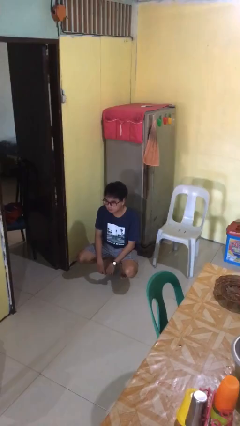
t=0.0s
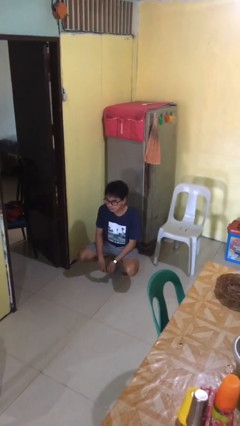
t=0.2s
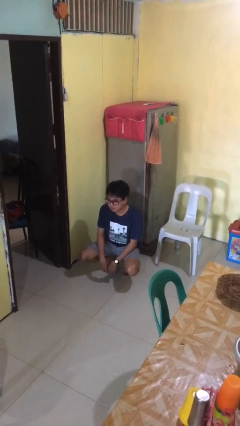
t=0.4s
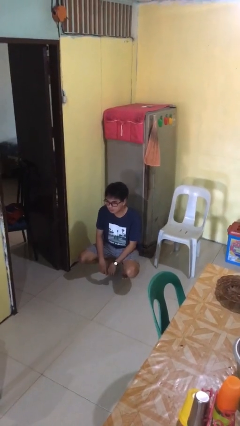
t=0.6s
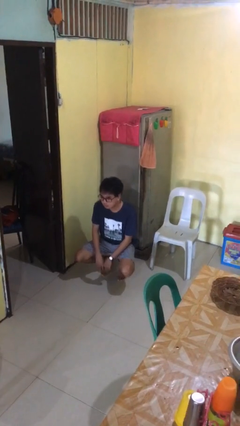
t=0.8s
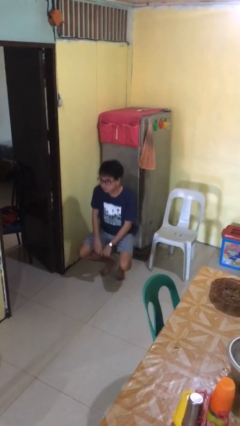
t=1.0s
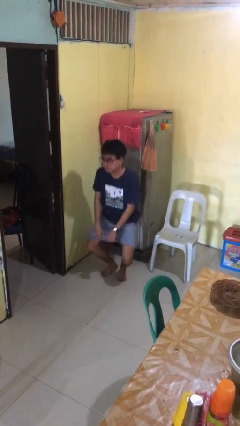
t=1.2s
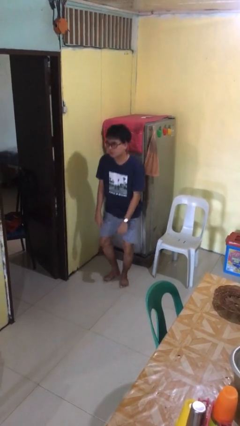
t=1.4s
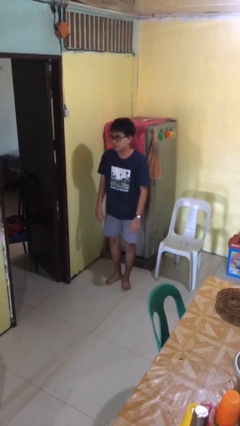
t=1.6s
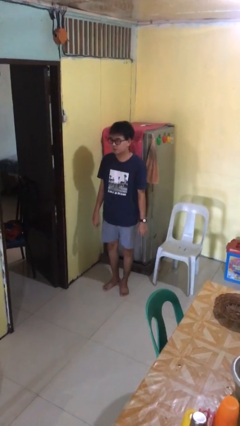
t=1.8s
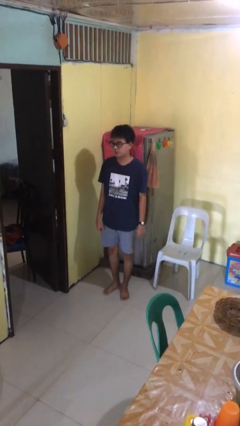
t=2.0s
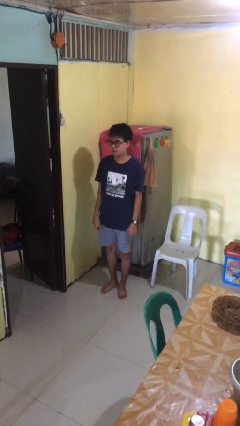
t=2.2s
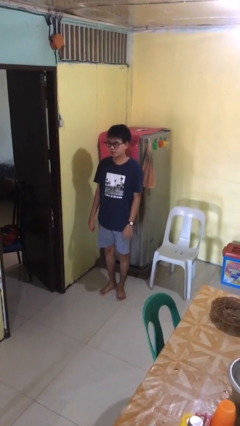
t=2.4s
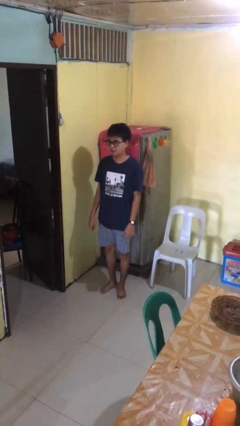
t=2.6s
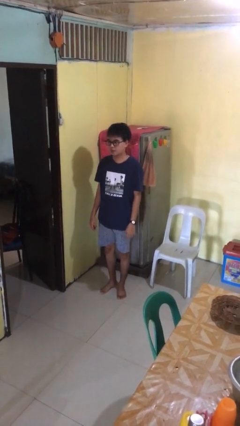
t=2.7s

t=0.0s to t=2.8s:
person stands up

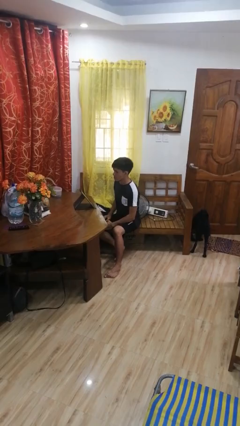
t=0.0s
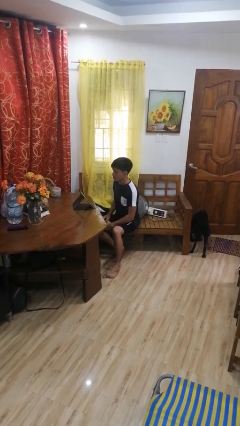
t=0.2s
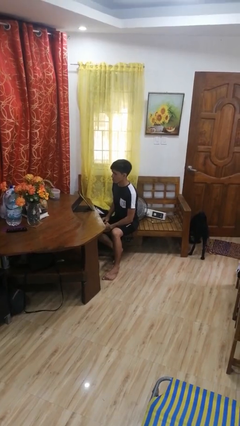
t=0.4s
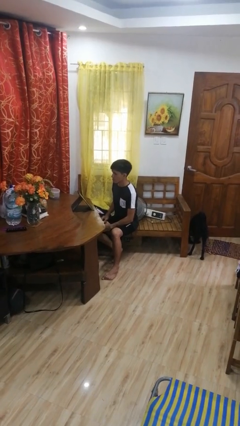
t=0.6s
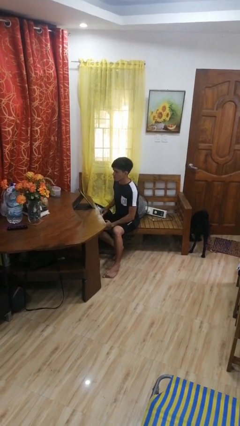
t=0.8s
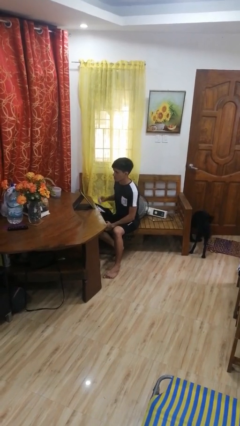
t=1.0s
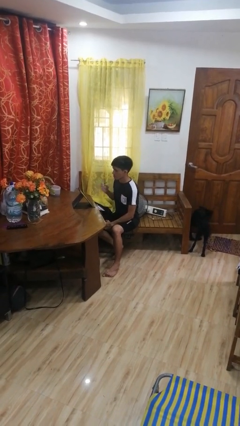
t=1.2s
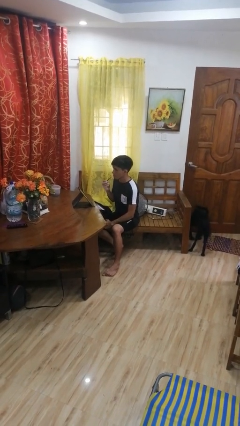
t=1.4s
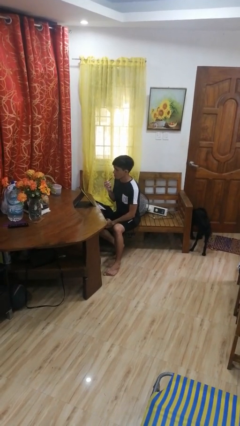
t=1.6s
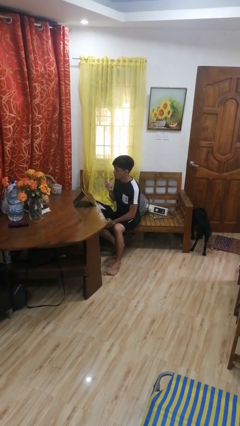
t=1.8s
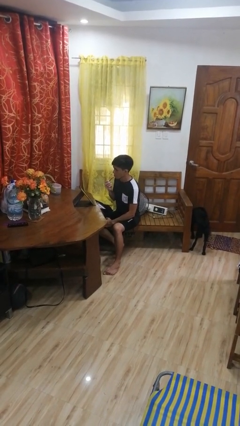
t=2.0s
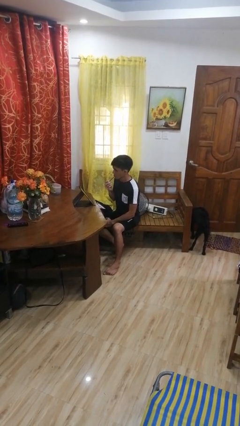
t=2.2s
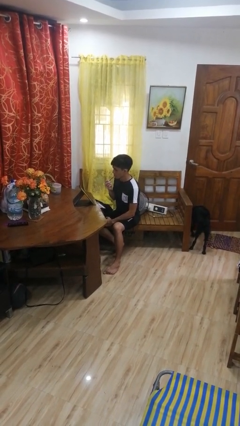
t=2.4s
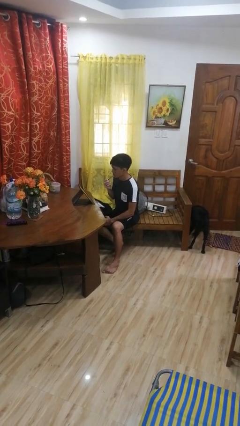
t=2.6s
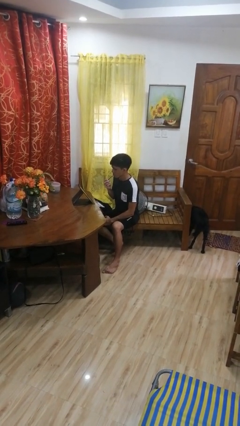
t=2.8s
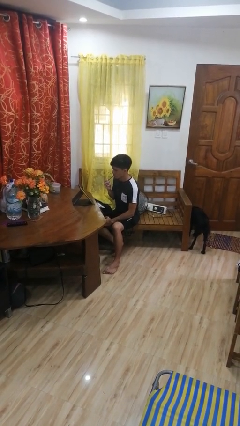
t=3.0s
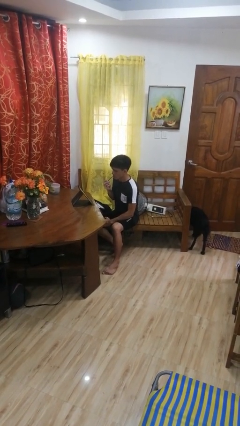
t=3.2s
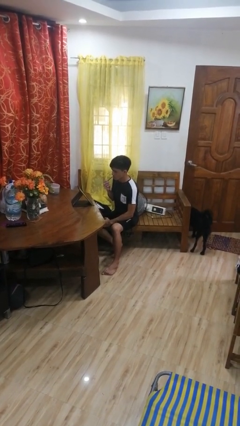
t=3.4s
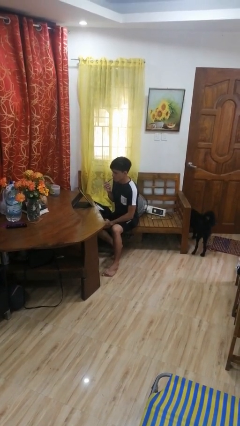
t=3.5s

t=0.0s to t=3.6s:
person applies lip makeup

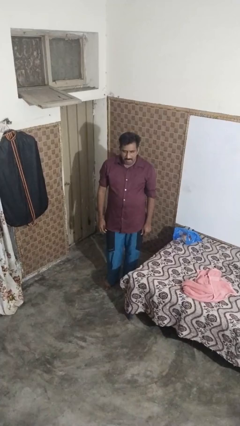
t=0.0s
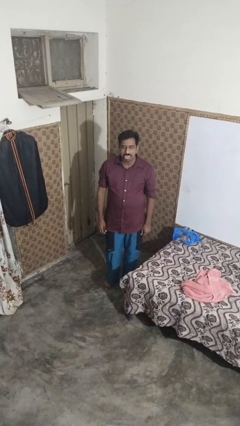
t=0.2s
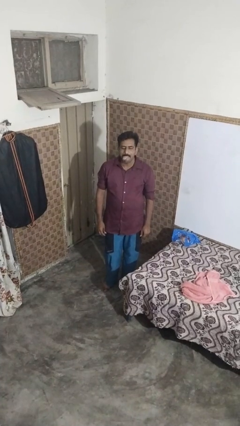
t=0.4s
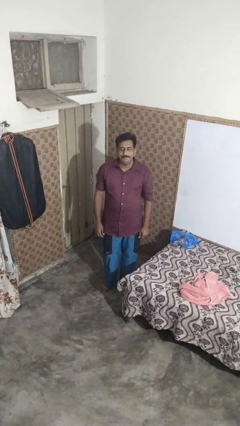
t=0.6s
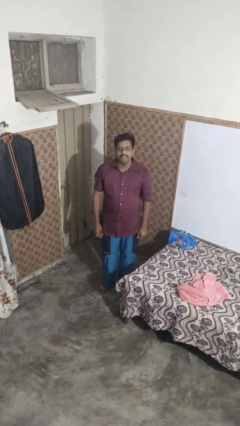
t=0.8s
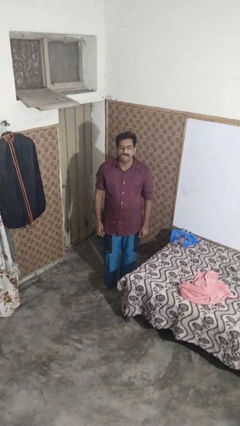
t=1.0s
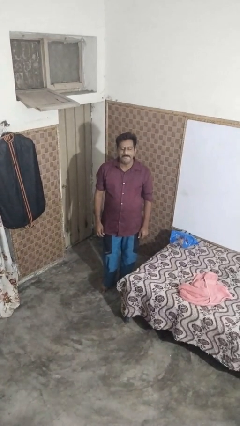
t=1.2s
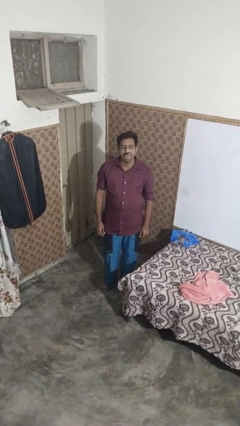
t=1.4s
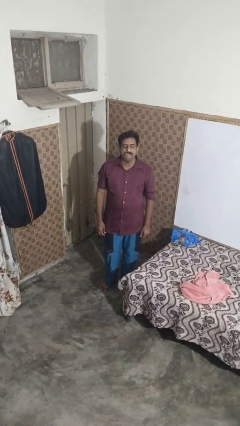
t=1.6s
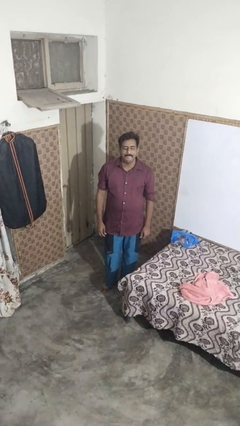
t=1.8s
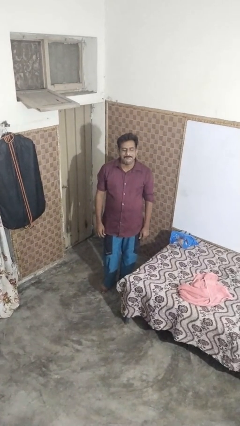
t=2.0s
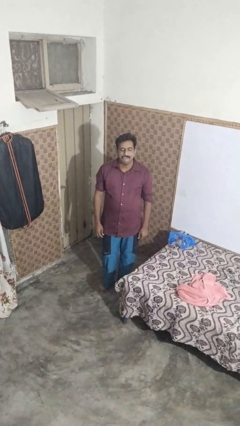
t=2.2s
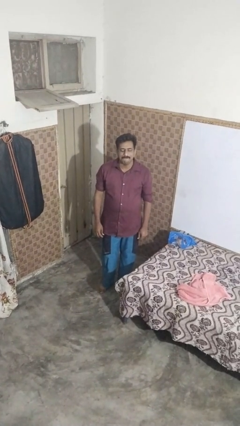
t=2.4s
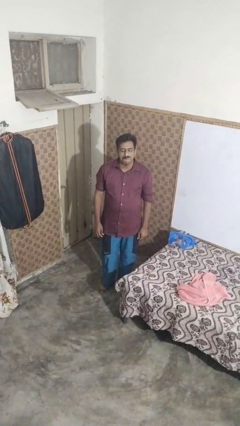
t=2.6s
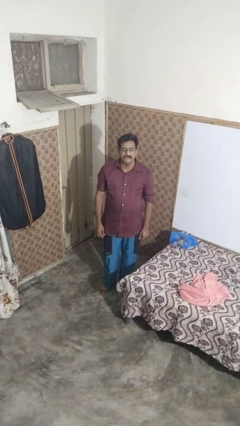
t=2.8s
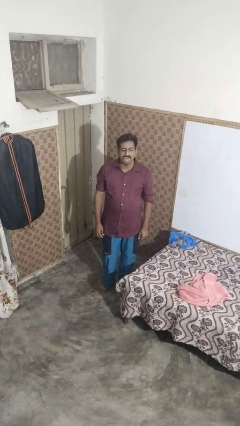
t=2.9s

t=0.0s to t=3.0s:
person sticks out tongue

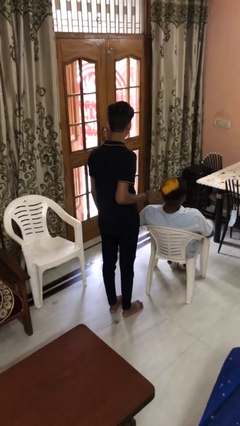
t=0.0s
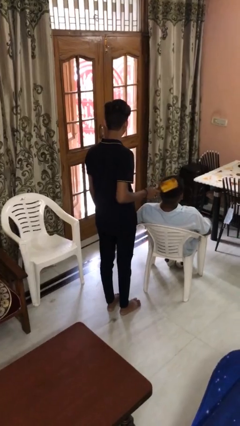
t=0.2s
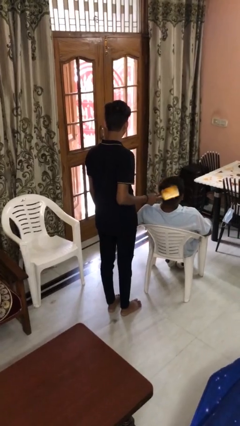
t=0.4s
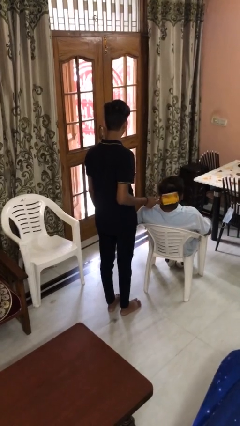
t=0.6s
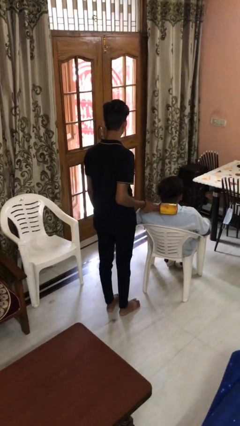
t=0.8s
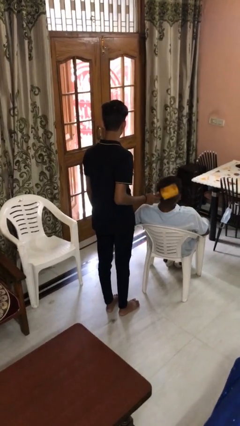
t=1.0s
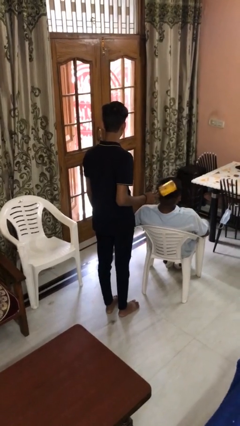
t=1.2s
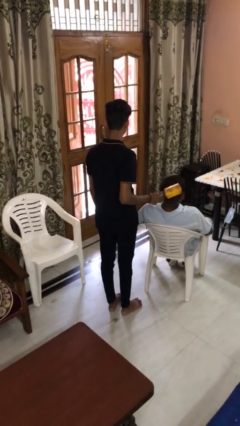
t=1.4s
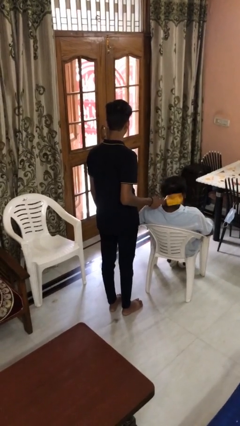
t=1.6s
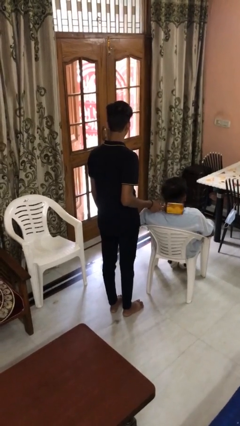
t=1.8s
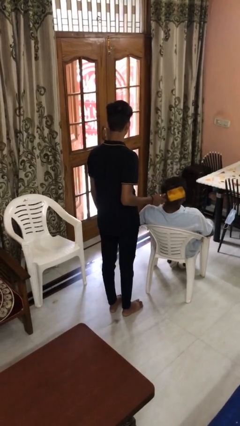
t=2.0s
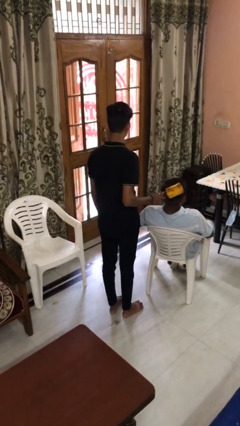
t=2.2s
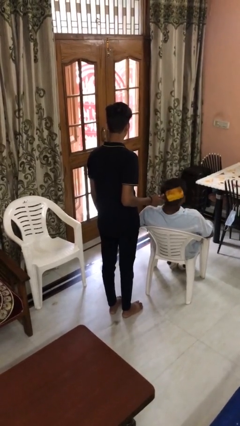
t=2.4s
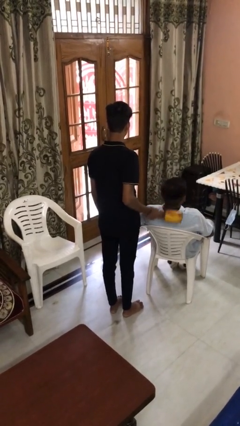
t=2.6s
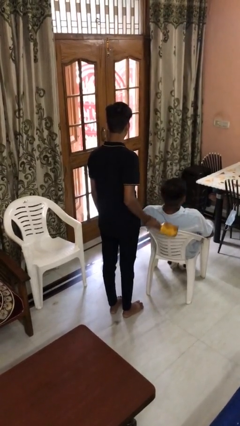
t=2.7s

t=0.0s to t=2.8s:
person brushes hair of person

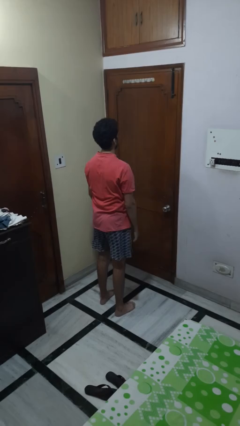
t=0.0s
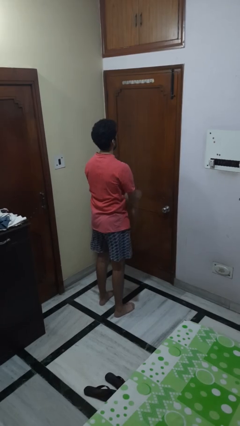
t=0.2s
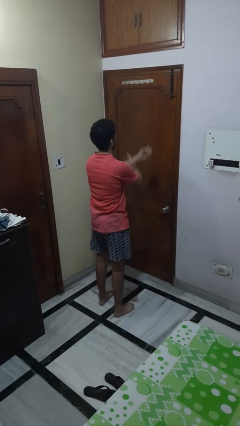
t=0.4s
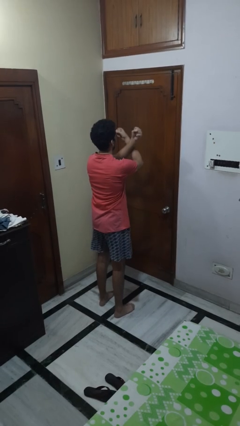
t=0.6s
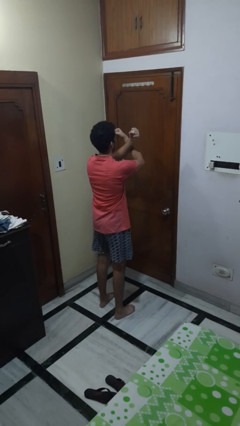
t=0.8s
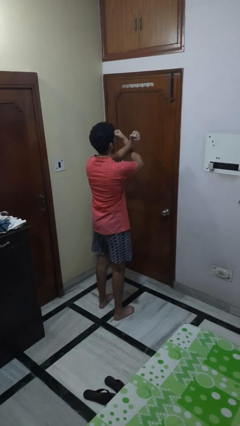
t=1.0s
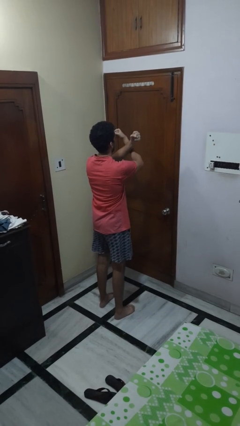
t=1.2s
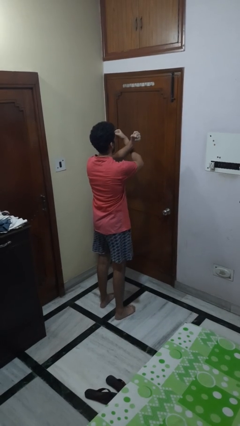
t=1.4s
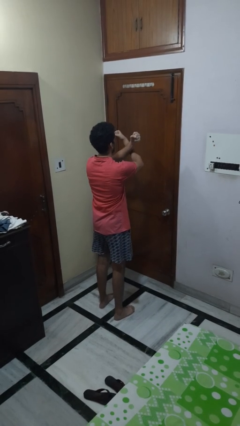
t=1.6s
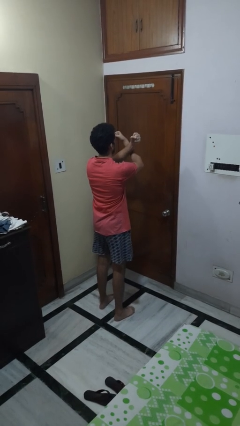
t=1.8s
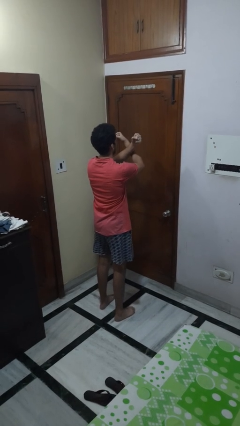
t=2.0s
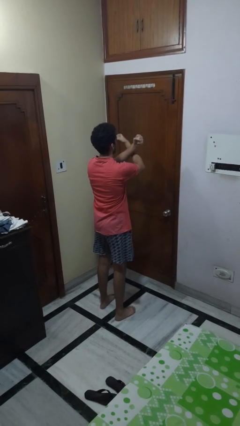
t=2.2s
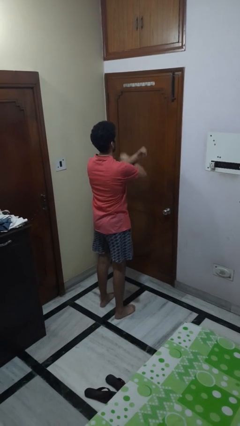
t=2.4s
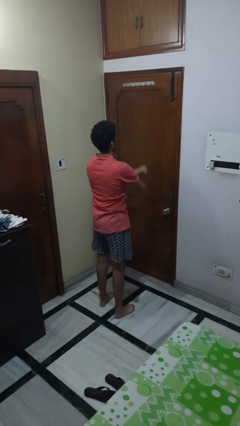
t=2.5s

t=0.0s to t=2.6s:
person gestures arms x

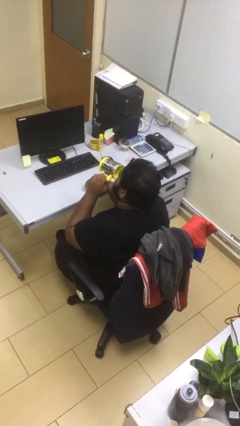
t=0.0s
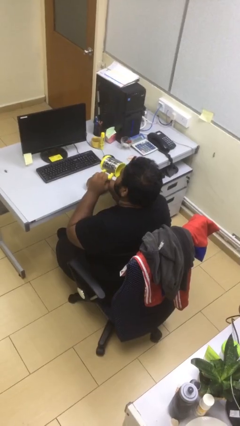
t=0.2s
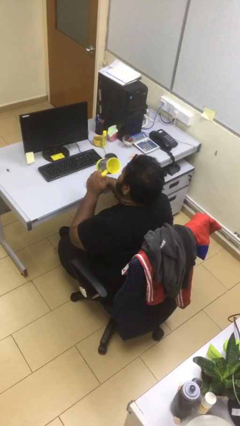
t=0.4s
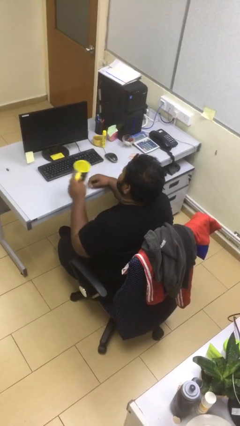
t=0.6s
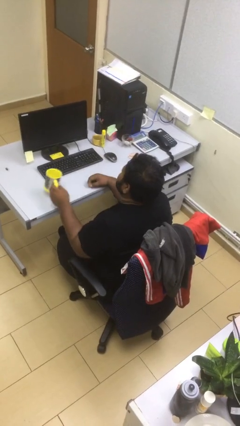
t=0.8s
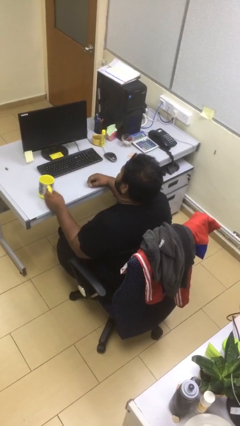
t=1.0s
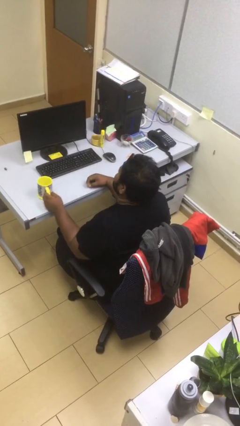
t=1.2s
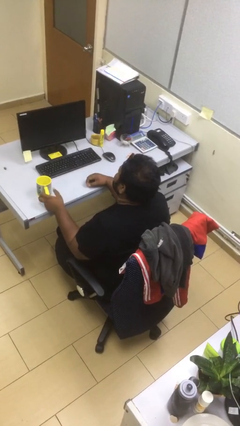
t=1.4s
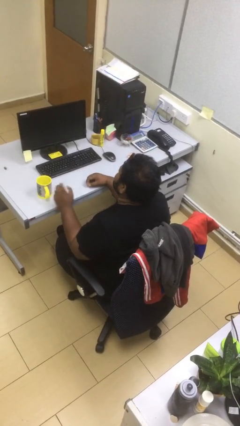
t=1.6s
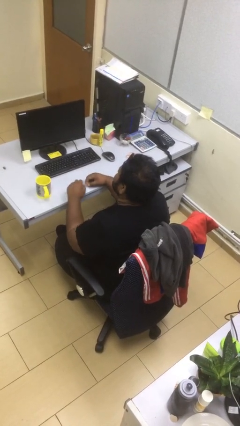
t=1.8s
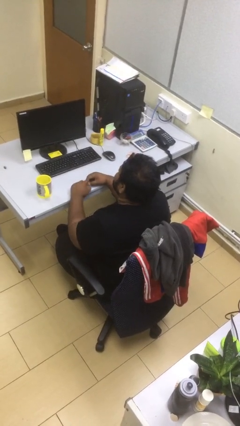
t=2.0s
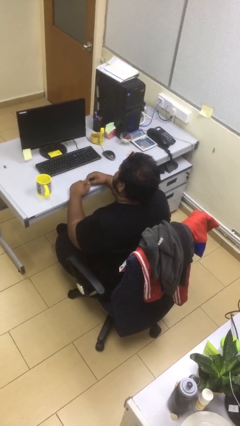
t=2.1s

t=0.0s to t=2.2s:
person puts down object on table

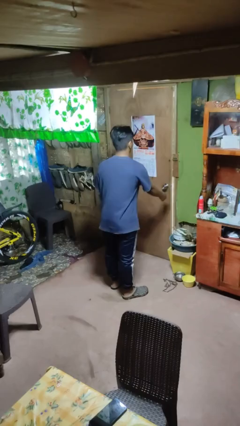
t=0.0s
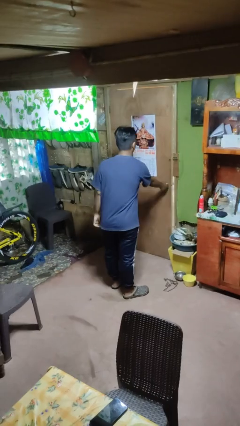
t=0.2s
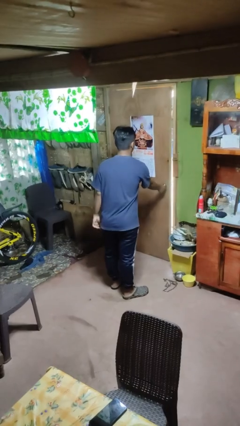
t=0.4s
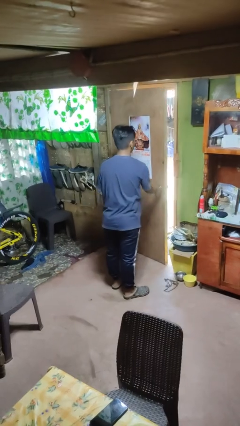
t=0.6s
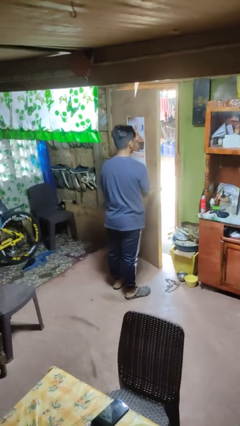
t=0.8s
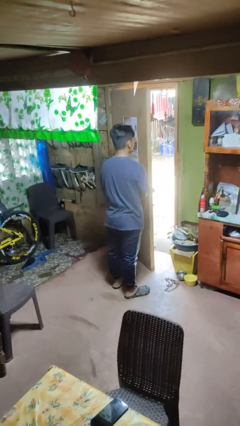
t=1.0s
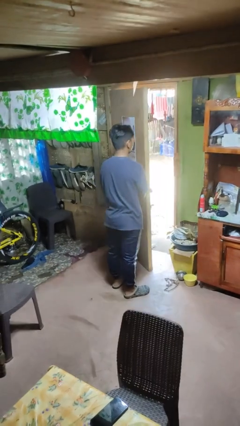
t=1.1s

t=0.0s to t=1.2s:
person opens facility door
